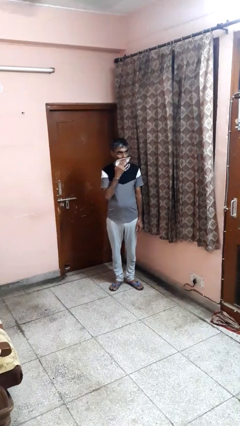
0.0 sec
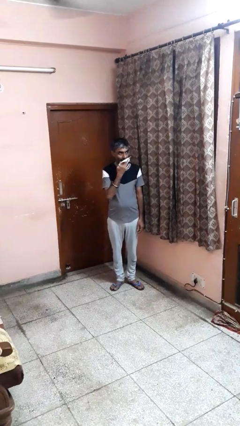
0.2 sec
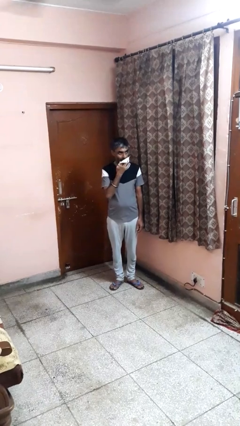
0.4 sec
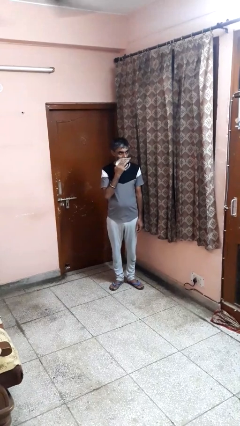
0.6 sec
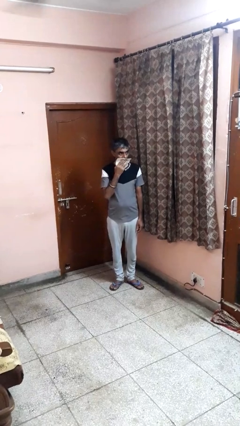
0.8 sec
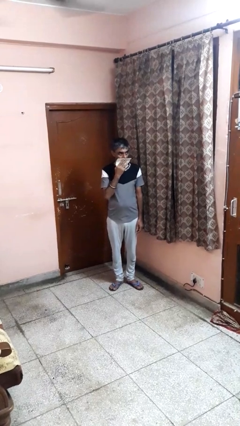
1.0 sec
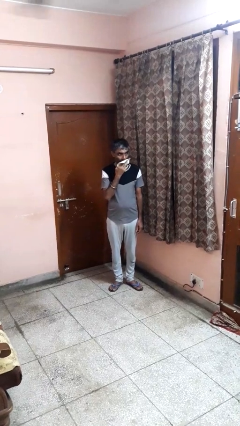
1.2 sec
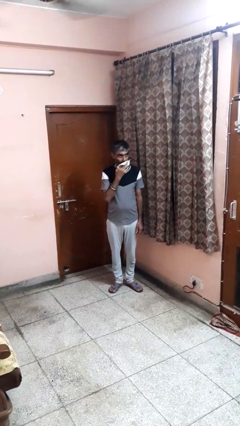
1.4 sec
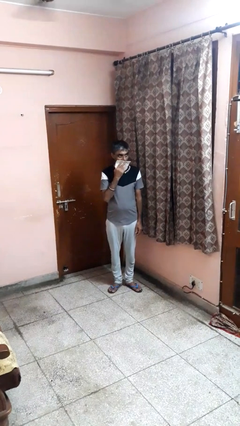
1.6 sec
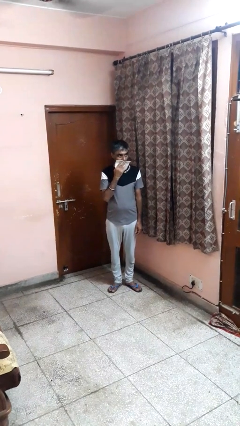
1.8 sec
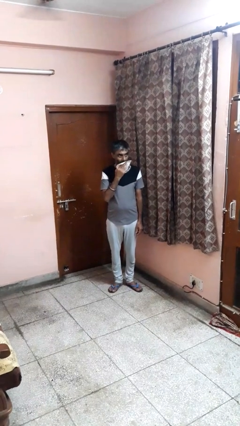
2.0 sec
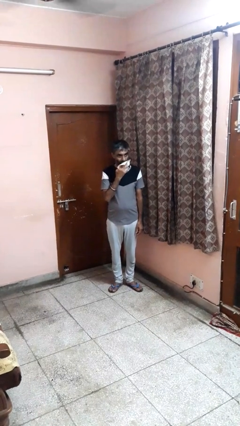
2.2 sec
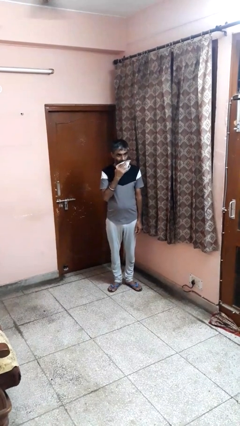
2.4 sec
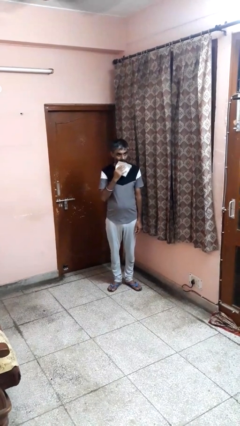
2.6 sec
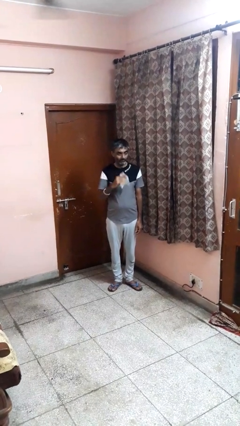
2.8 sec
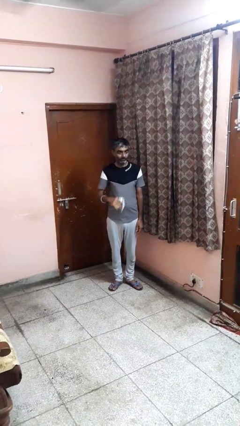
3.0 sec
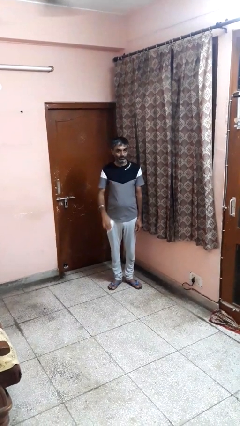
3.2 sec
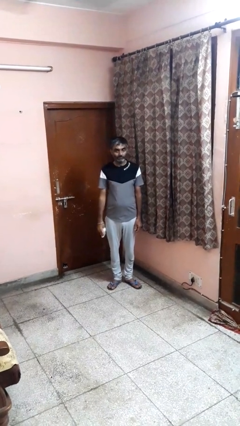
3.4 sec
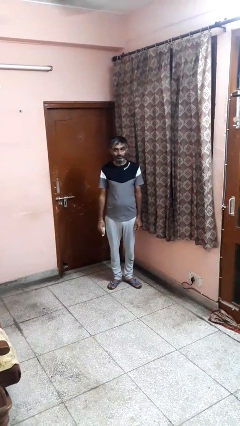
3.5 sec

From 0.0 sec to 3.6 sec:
person wipes mouth with napkin

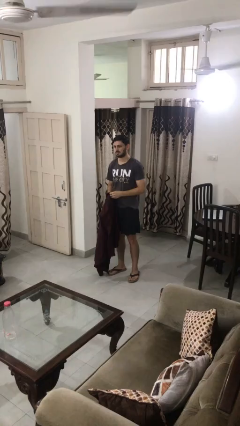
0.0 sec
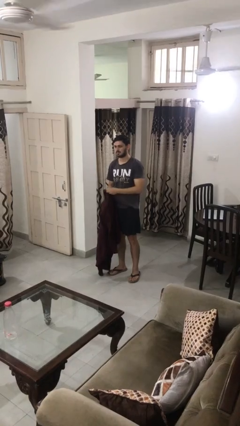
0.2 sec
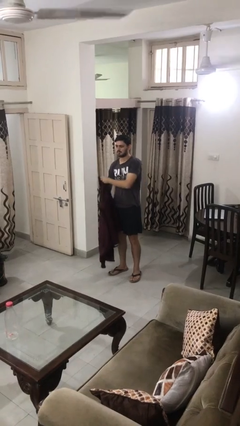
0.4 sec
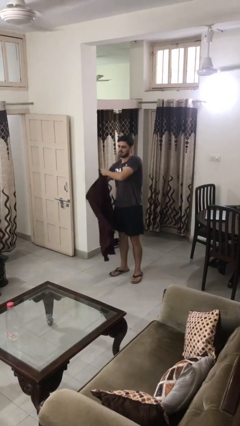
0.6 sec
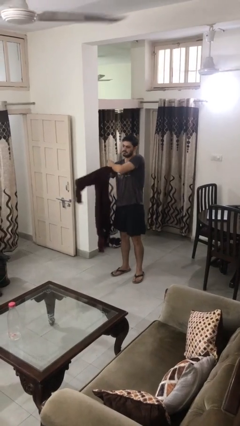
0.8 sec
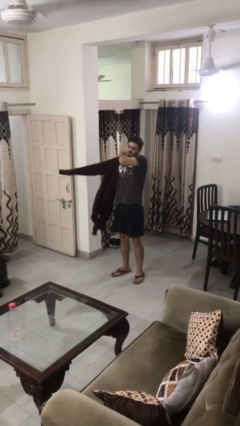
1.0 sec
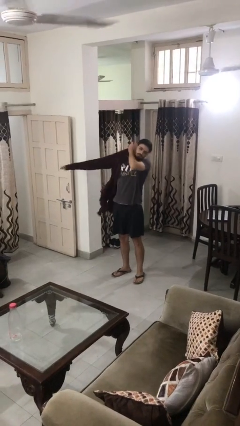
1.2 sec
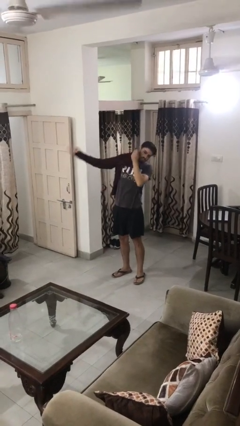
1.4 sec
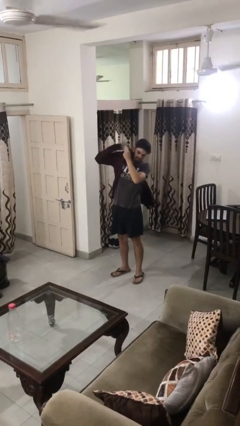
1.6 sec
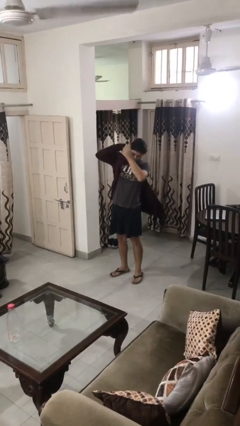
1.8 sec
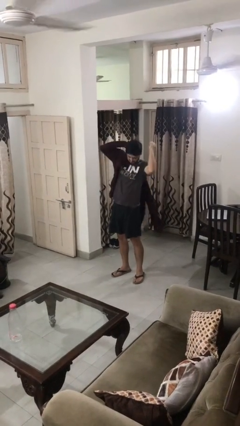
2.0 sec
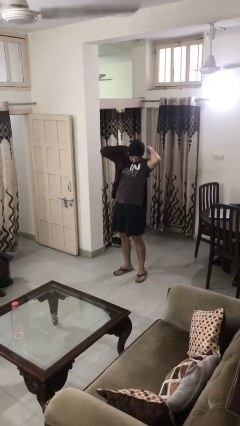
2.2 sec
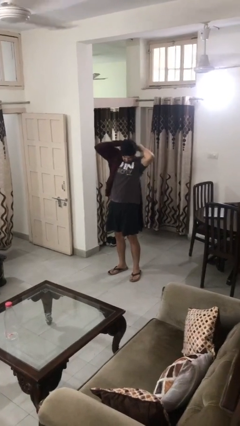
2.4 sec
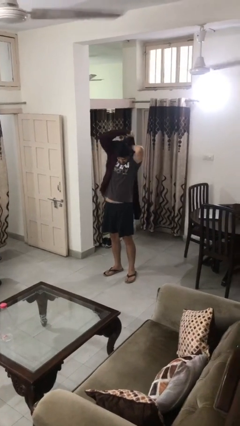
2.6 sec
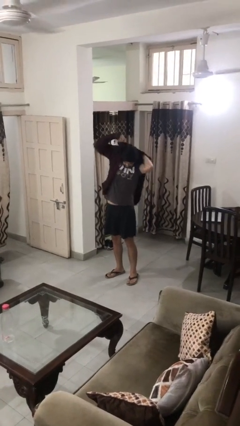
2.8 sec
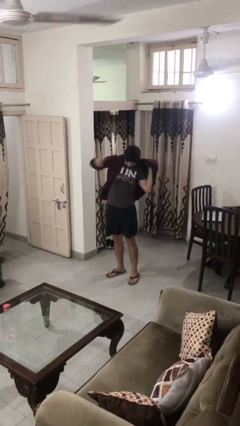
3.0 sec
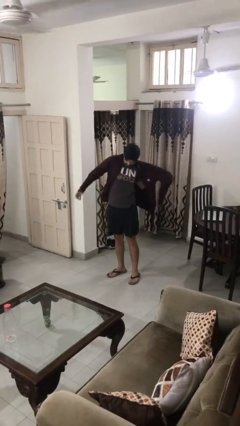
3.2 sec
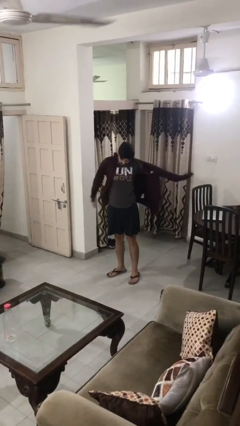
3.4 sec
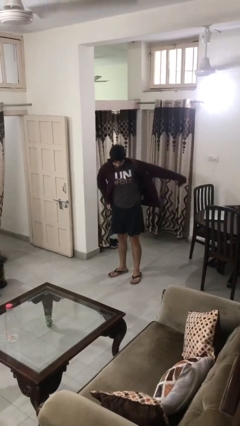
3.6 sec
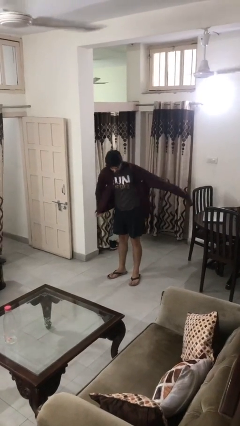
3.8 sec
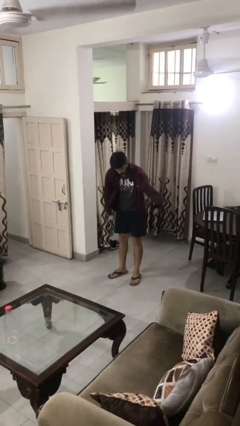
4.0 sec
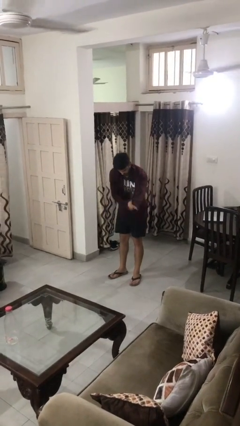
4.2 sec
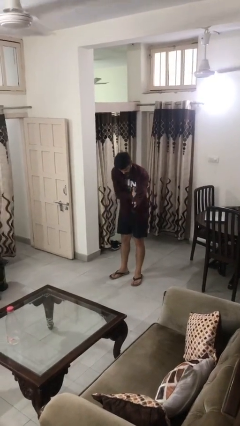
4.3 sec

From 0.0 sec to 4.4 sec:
person puts on jacket

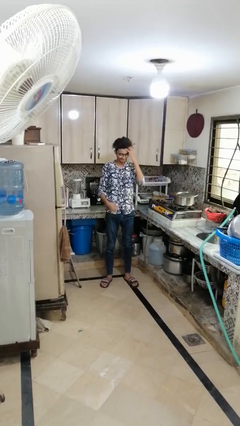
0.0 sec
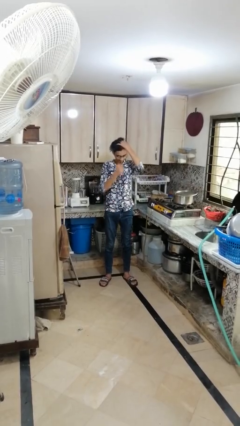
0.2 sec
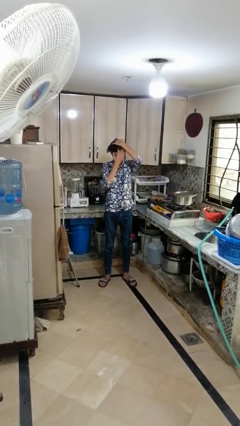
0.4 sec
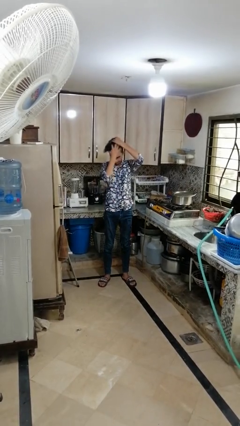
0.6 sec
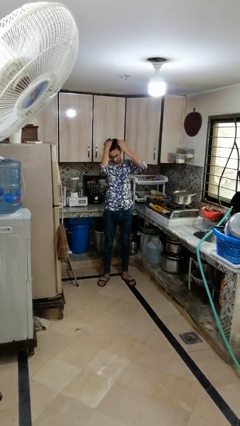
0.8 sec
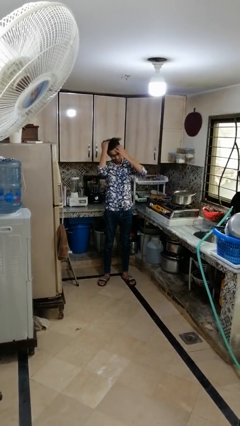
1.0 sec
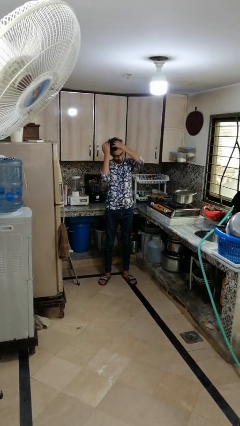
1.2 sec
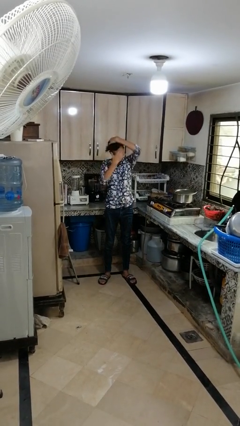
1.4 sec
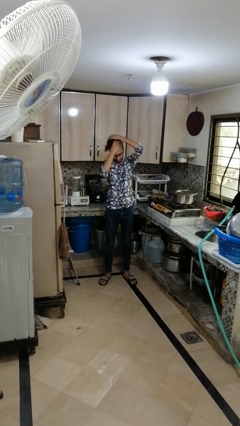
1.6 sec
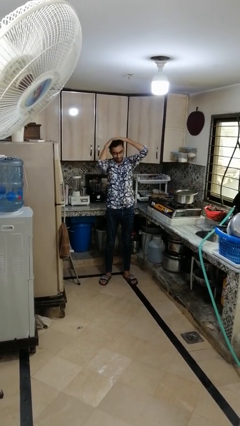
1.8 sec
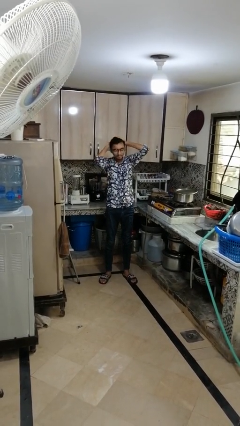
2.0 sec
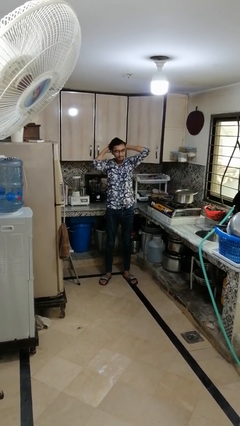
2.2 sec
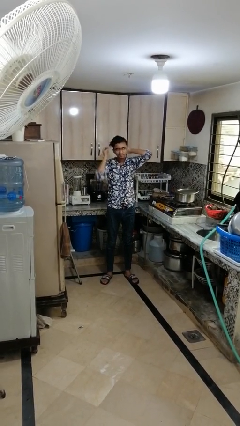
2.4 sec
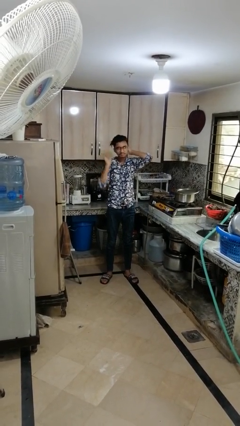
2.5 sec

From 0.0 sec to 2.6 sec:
person strokes hair

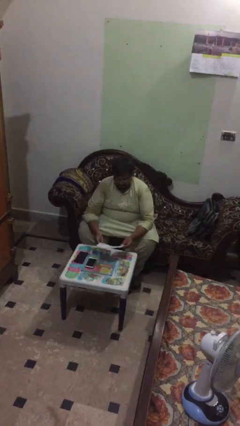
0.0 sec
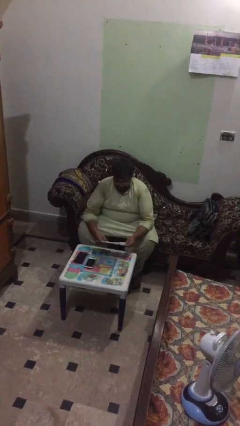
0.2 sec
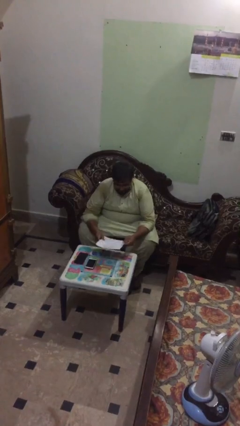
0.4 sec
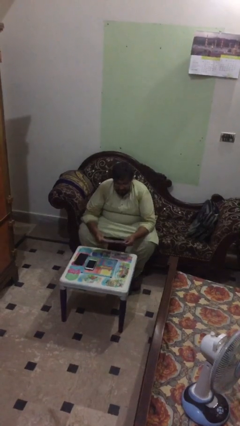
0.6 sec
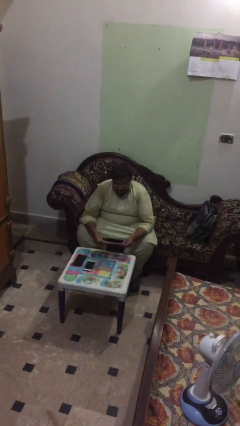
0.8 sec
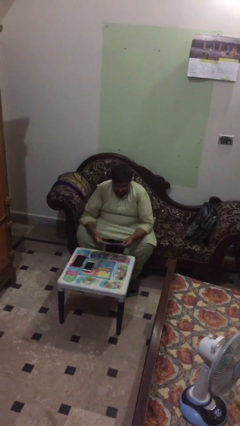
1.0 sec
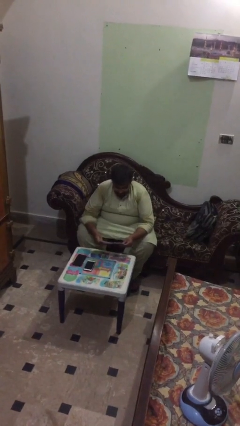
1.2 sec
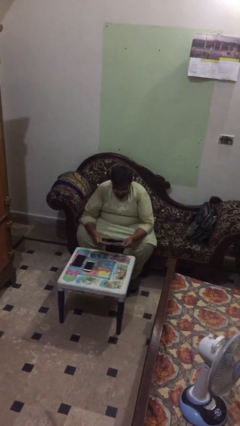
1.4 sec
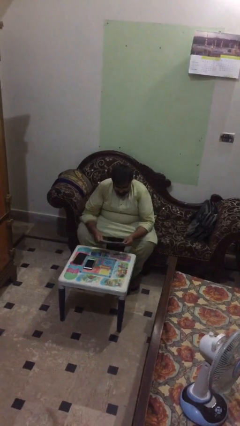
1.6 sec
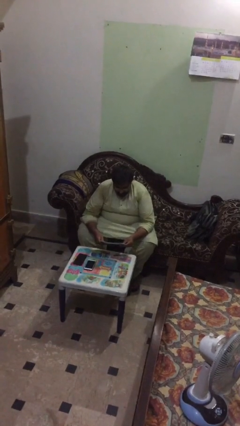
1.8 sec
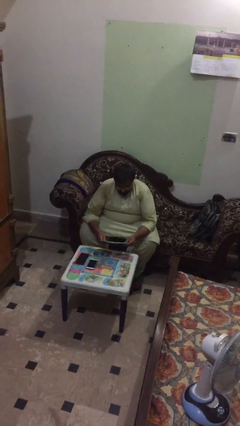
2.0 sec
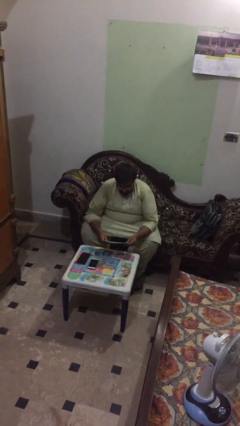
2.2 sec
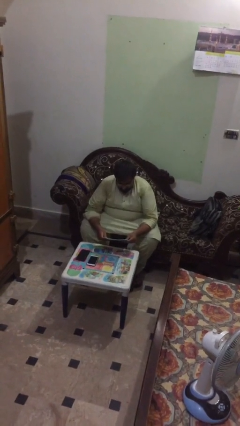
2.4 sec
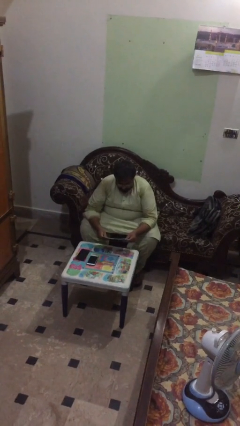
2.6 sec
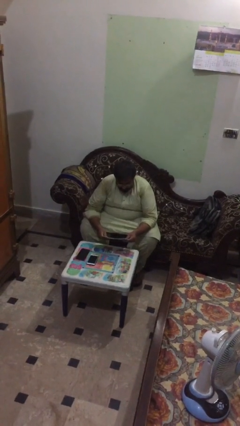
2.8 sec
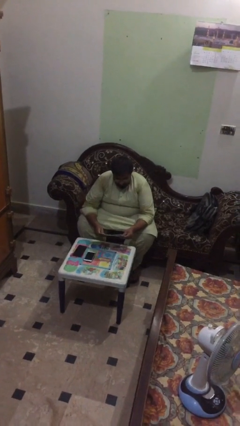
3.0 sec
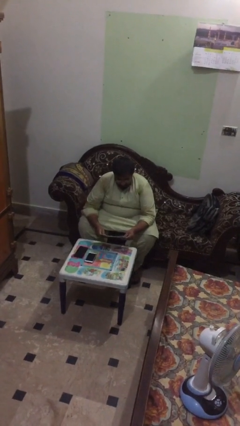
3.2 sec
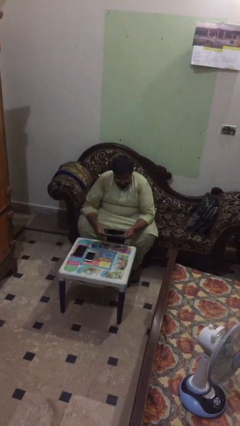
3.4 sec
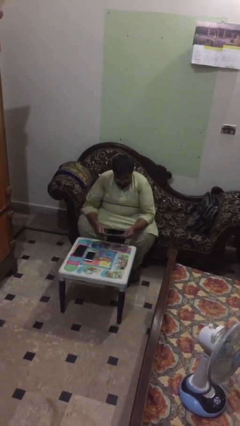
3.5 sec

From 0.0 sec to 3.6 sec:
person reads document

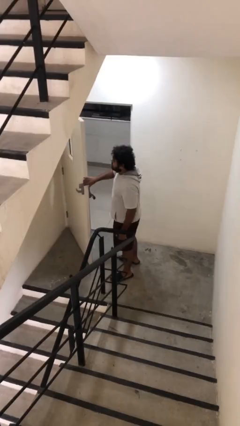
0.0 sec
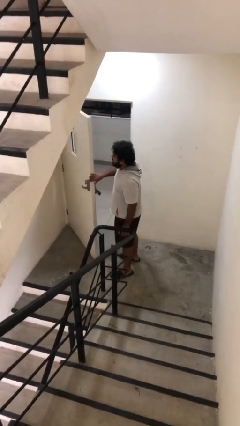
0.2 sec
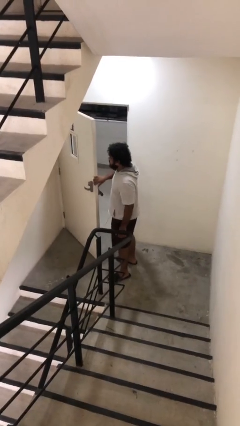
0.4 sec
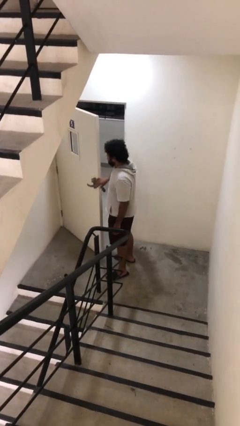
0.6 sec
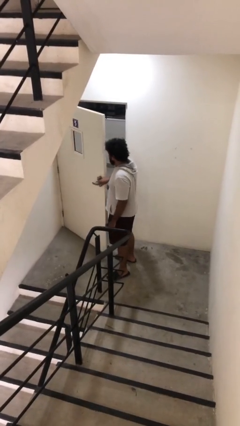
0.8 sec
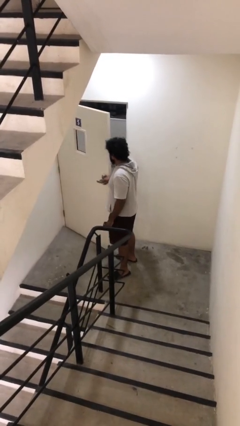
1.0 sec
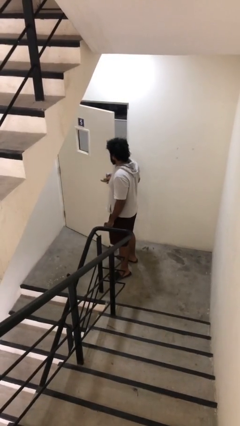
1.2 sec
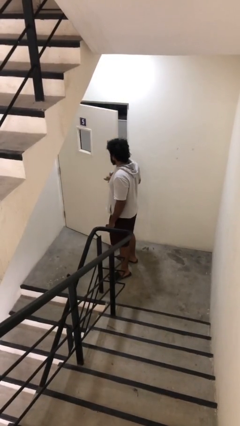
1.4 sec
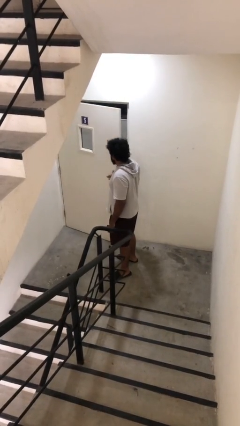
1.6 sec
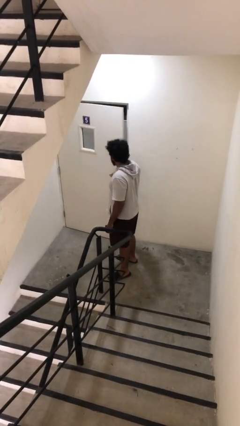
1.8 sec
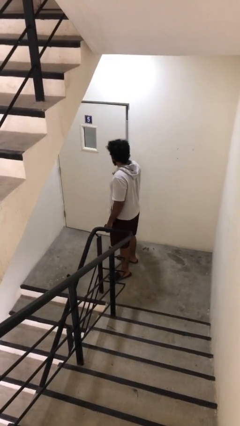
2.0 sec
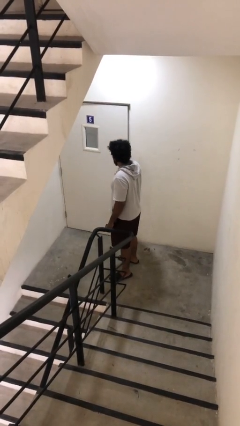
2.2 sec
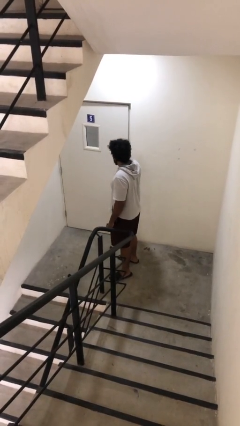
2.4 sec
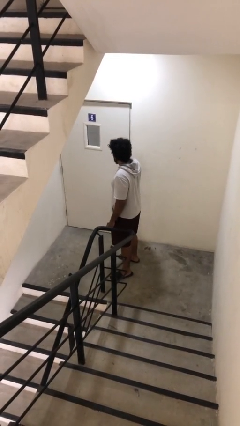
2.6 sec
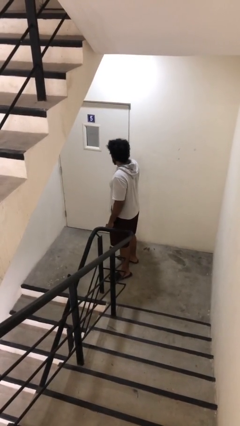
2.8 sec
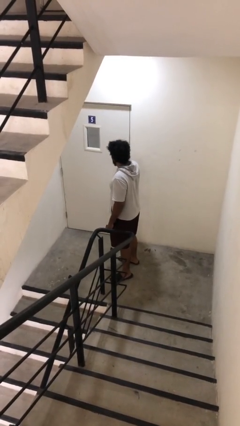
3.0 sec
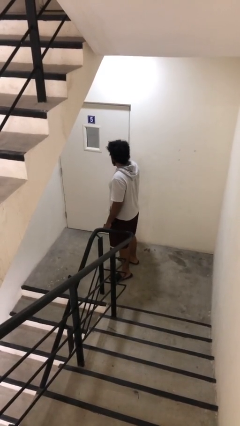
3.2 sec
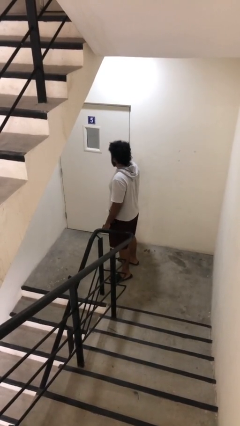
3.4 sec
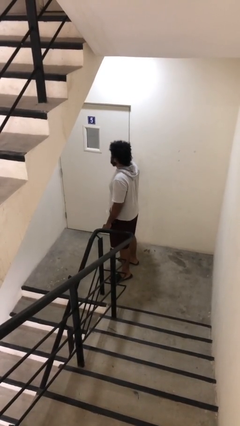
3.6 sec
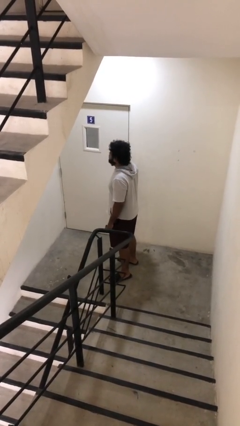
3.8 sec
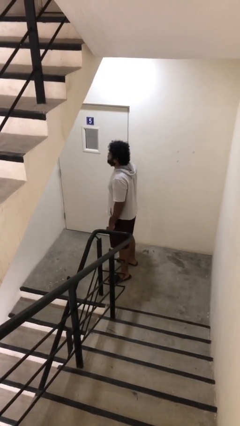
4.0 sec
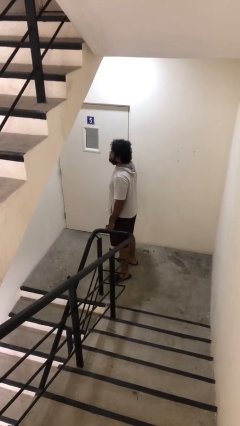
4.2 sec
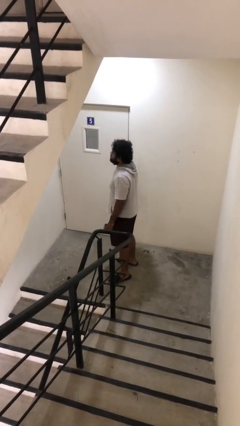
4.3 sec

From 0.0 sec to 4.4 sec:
person closes facility door
